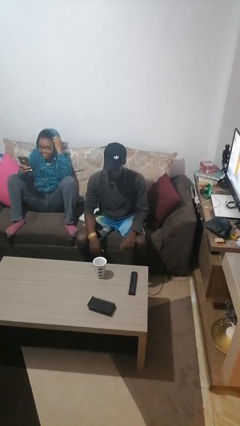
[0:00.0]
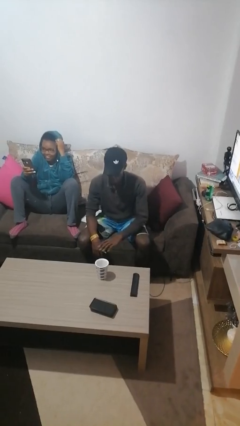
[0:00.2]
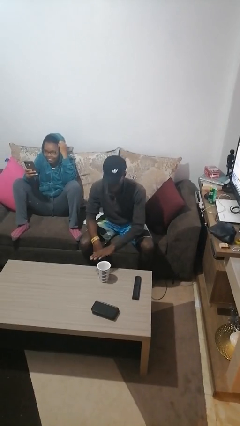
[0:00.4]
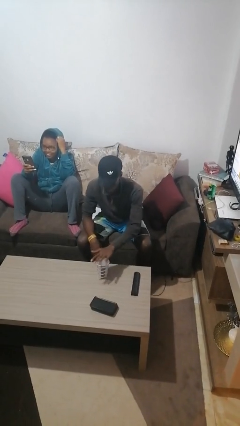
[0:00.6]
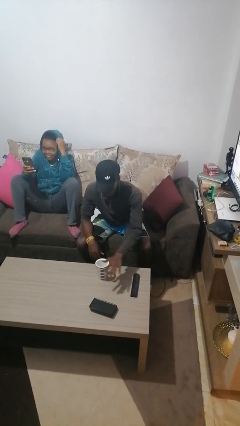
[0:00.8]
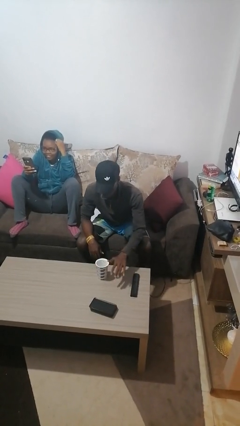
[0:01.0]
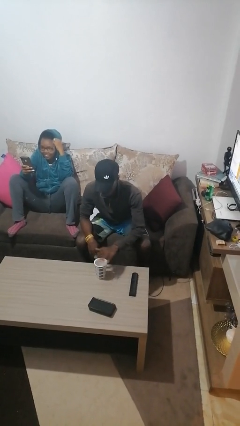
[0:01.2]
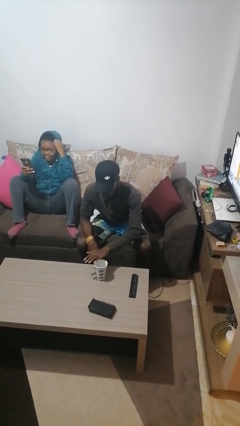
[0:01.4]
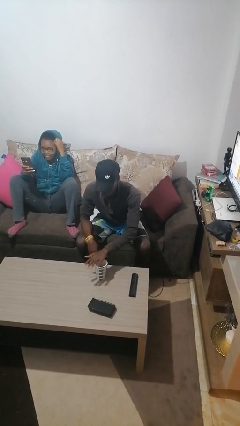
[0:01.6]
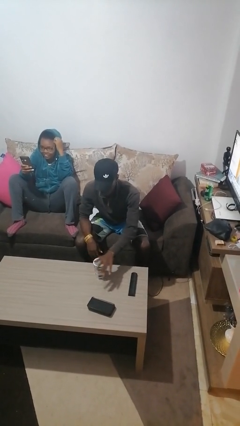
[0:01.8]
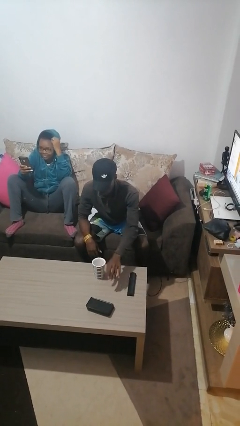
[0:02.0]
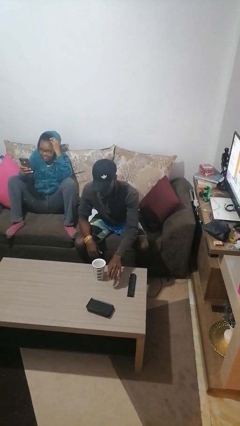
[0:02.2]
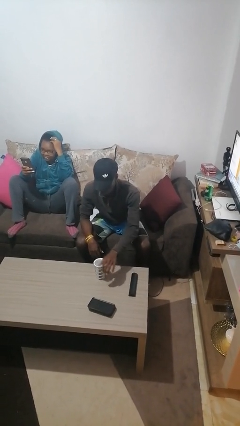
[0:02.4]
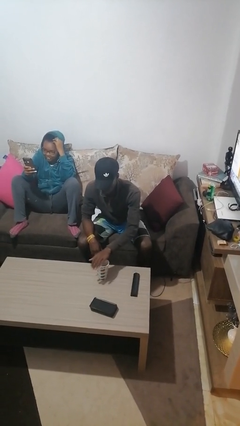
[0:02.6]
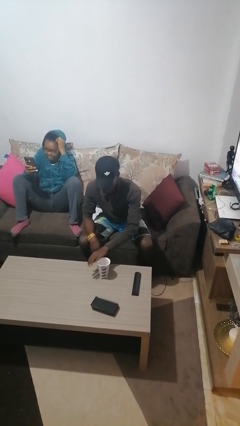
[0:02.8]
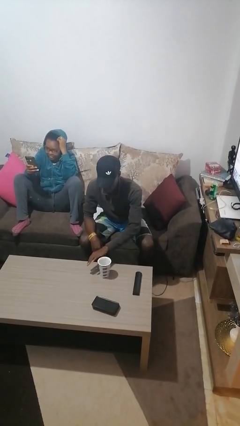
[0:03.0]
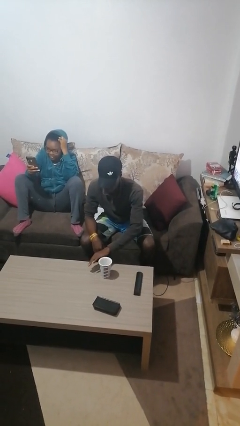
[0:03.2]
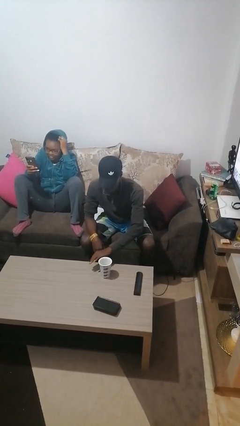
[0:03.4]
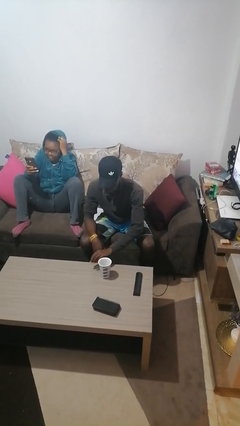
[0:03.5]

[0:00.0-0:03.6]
person waves hand over object

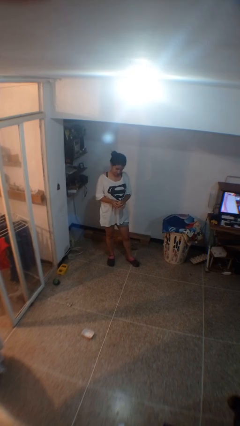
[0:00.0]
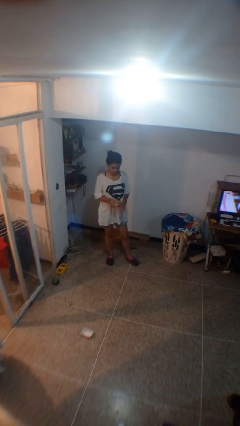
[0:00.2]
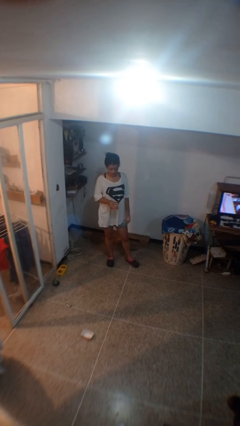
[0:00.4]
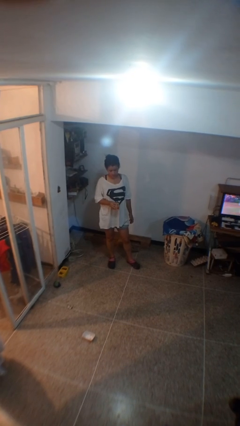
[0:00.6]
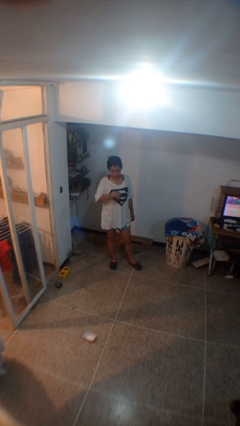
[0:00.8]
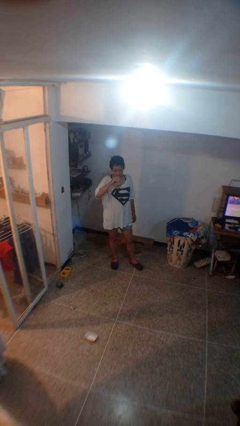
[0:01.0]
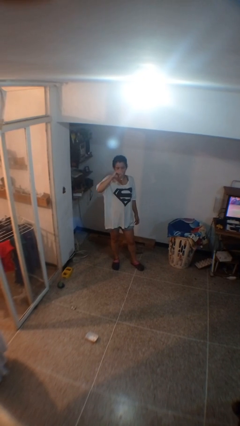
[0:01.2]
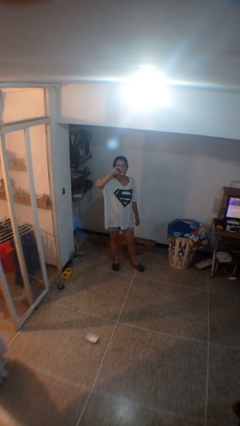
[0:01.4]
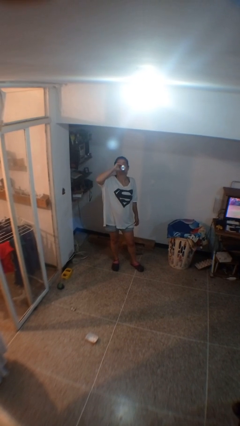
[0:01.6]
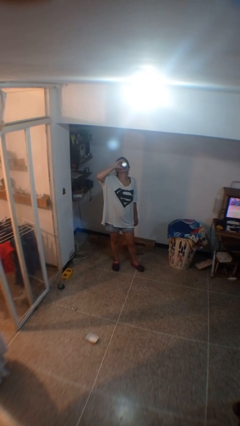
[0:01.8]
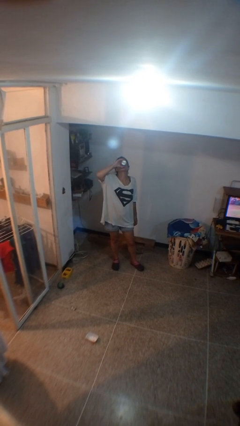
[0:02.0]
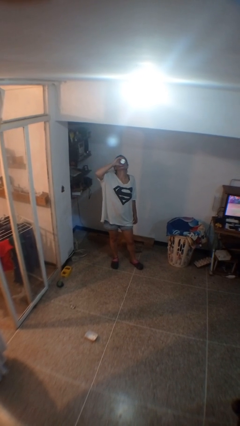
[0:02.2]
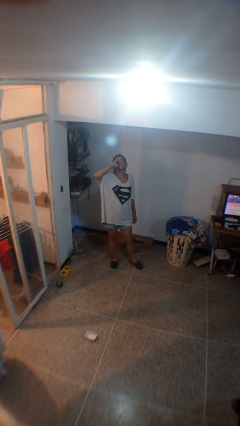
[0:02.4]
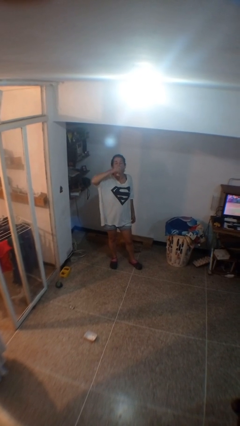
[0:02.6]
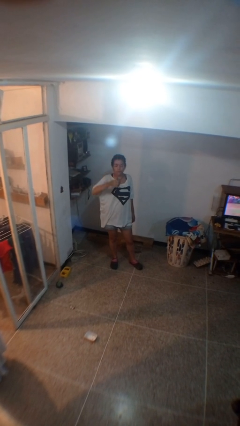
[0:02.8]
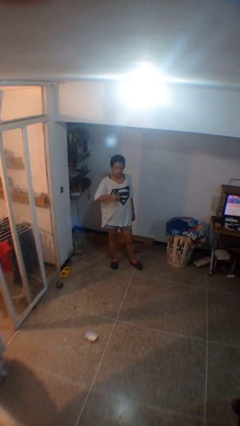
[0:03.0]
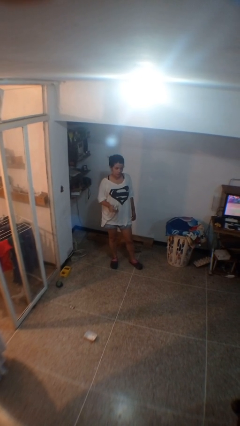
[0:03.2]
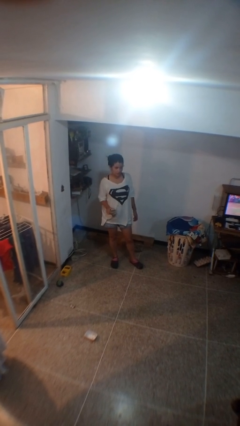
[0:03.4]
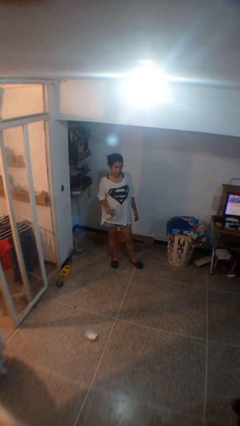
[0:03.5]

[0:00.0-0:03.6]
person drinks from beverage can

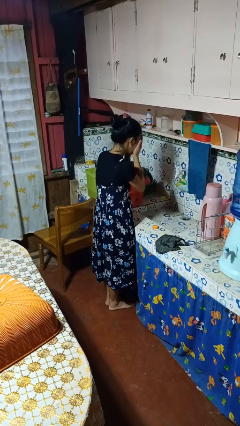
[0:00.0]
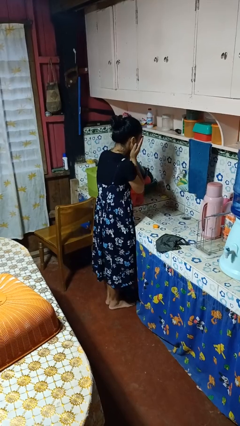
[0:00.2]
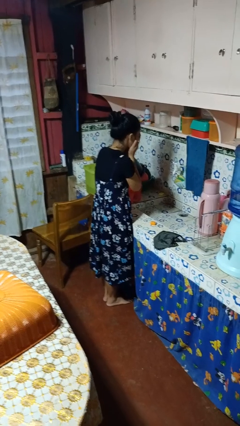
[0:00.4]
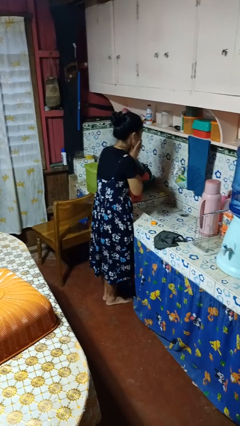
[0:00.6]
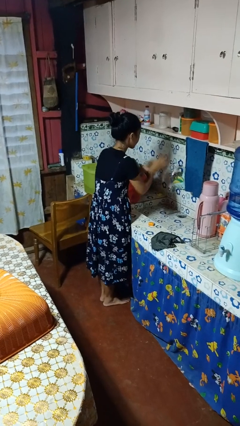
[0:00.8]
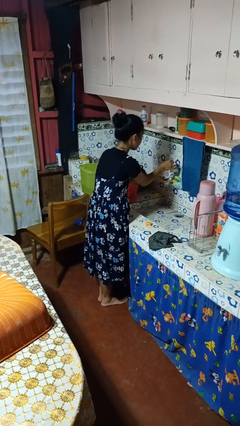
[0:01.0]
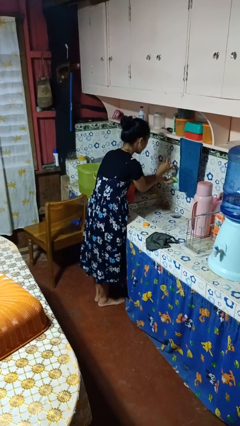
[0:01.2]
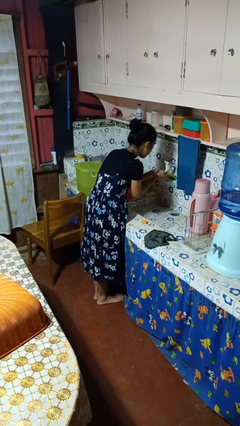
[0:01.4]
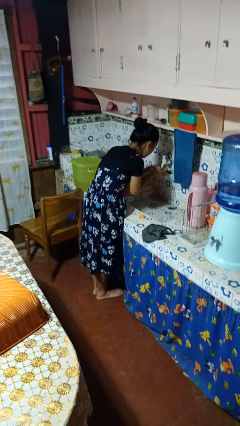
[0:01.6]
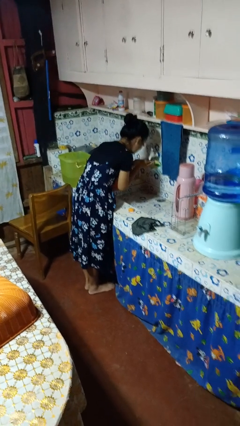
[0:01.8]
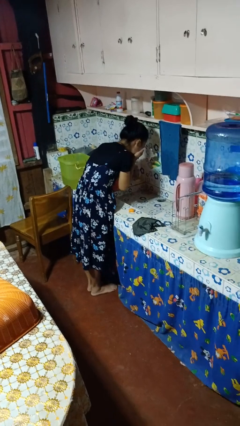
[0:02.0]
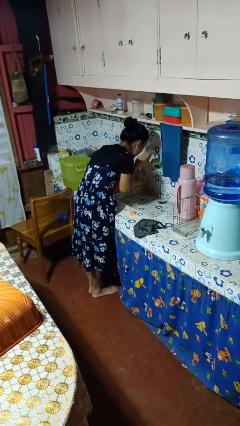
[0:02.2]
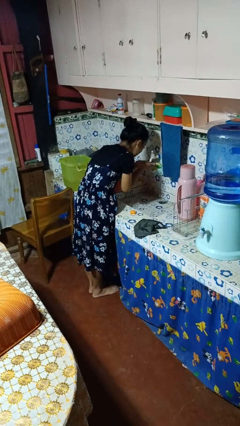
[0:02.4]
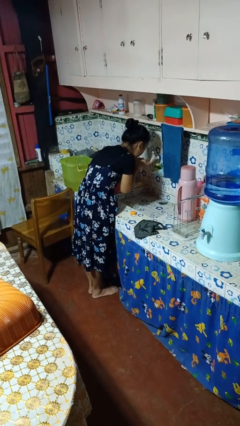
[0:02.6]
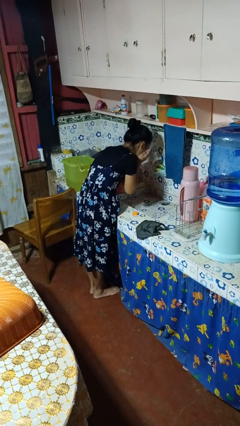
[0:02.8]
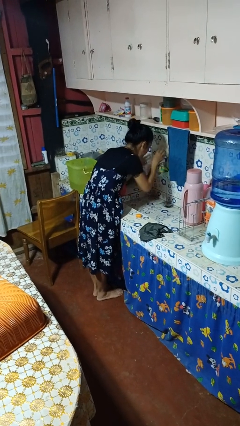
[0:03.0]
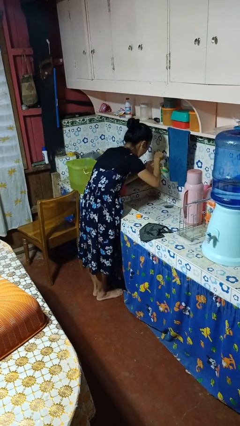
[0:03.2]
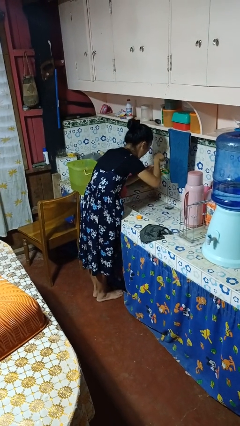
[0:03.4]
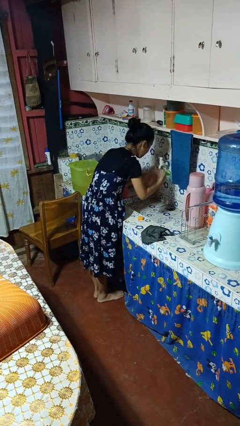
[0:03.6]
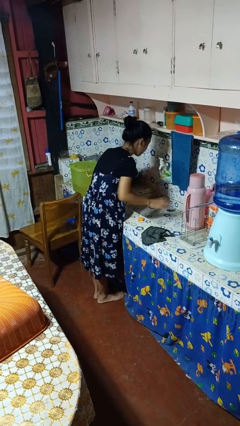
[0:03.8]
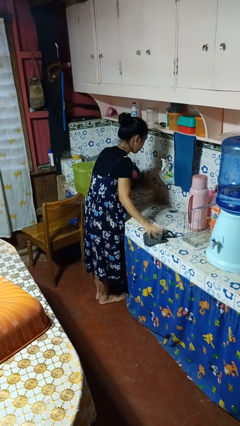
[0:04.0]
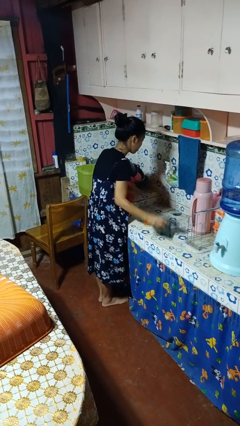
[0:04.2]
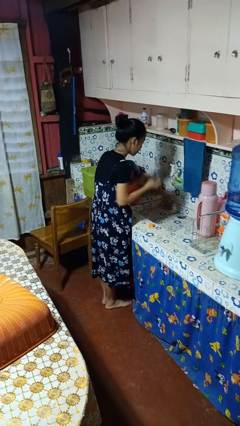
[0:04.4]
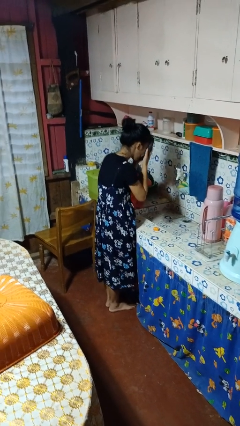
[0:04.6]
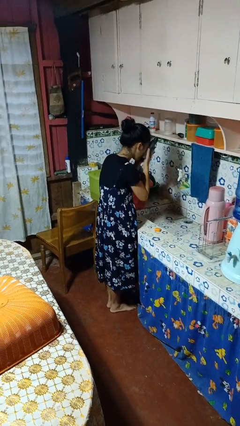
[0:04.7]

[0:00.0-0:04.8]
person washes face

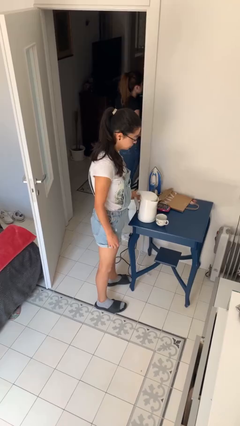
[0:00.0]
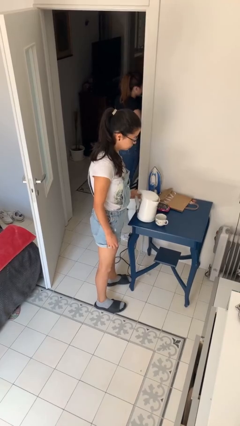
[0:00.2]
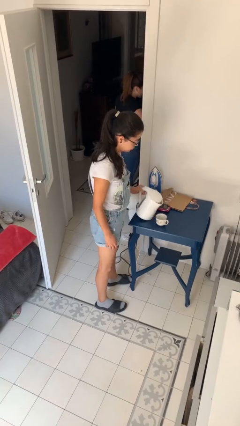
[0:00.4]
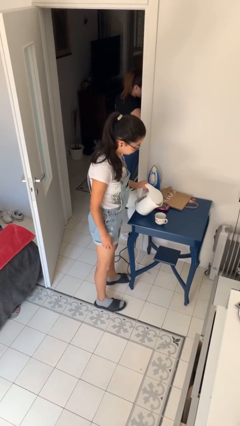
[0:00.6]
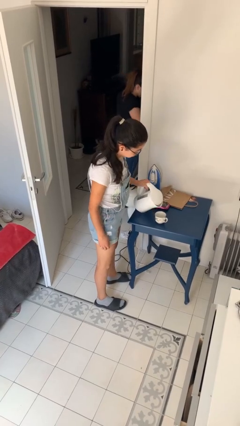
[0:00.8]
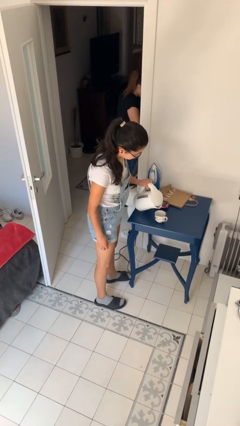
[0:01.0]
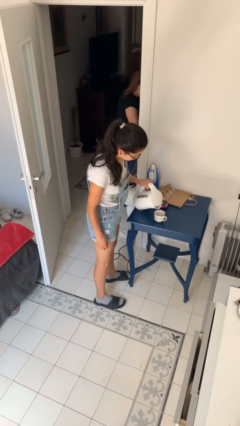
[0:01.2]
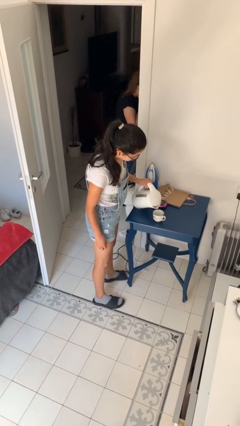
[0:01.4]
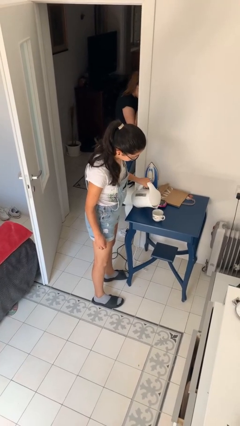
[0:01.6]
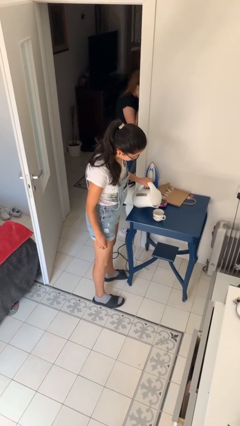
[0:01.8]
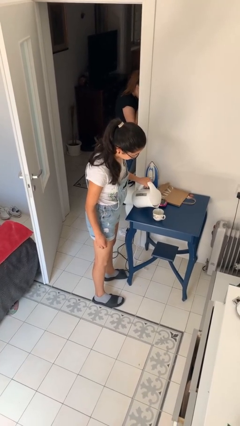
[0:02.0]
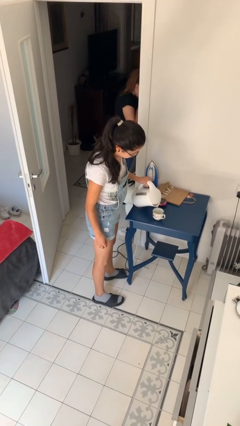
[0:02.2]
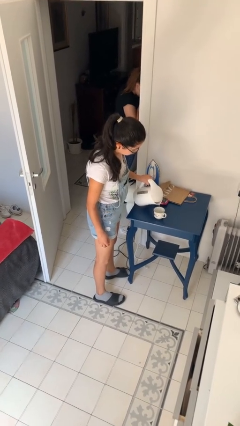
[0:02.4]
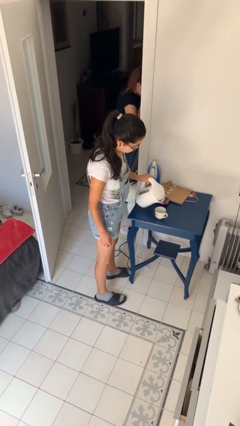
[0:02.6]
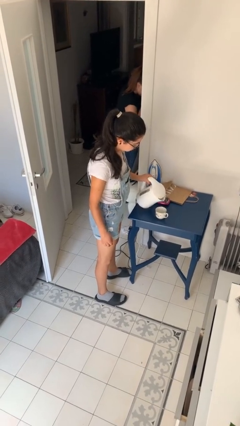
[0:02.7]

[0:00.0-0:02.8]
person pours coffee into mug

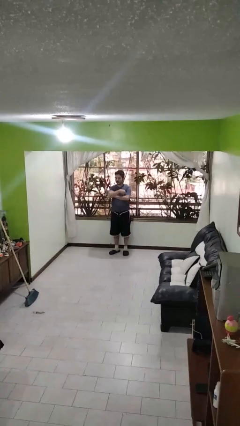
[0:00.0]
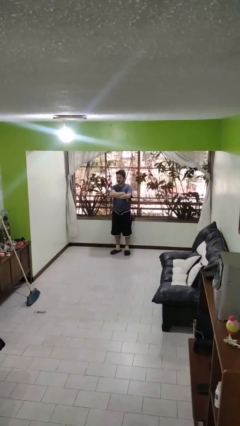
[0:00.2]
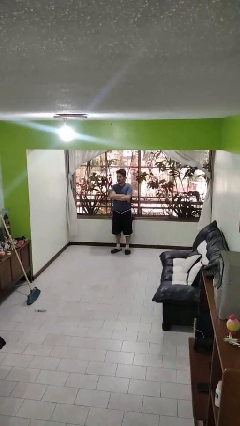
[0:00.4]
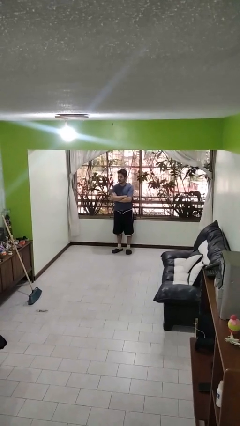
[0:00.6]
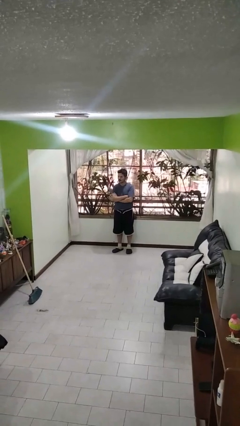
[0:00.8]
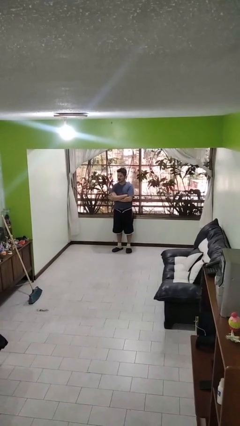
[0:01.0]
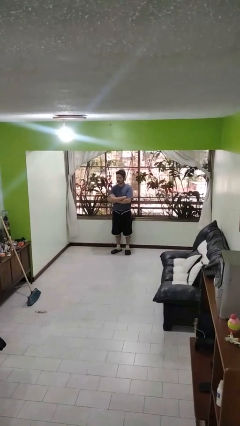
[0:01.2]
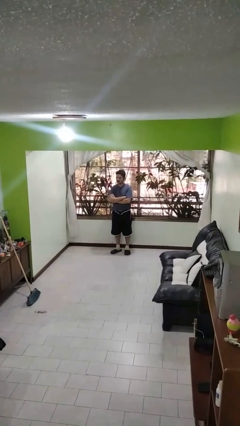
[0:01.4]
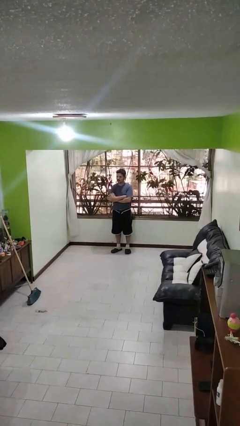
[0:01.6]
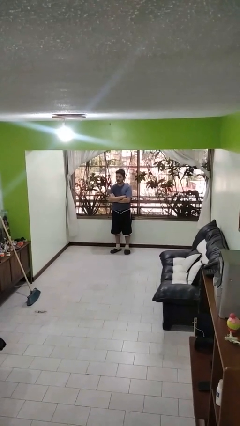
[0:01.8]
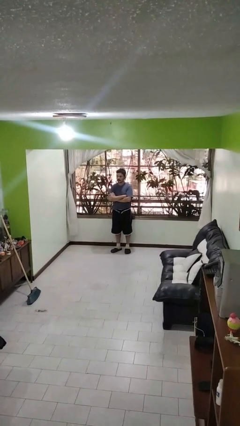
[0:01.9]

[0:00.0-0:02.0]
person crosses arms

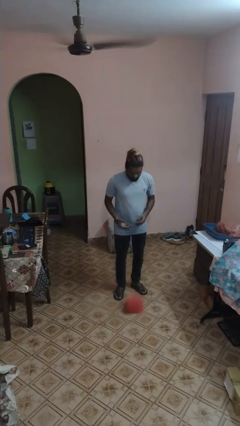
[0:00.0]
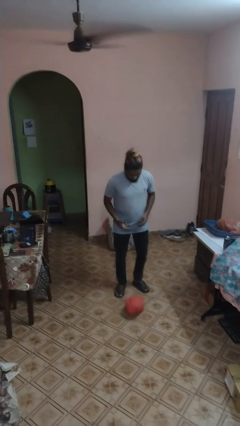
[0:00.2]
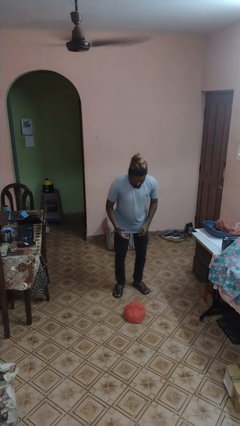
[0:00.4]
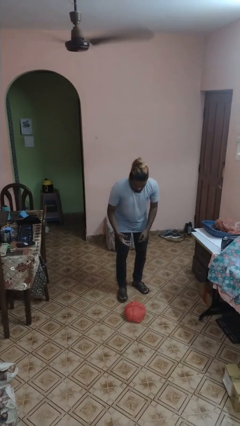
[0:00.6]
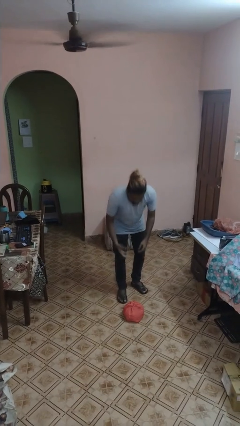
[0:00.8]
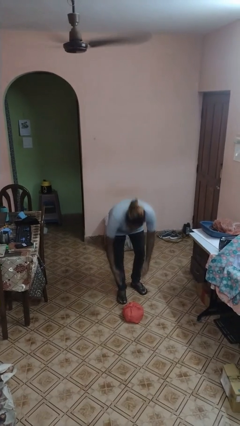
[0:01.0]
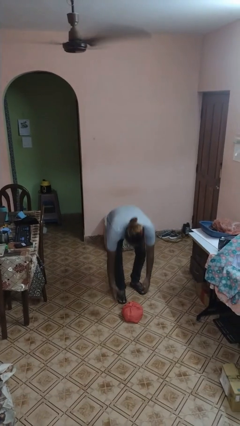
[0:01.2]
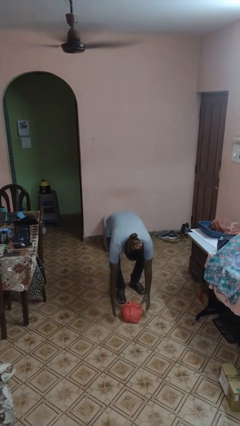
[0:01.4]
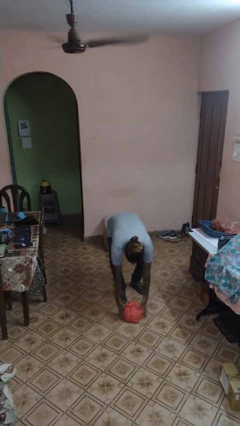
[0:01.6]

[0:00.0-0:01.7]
person drops object
